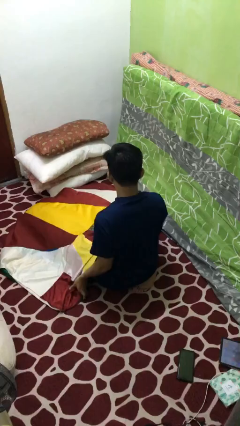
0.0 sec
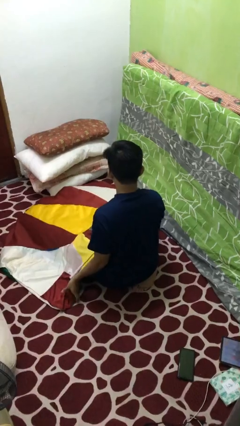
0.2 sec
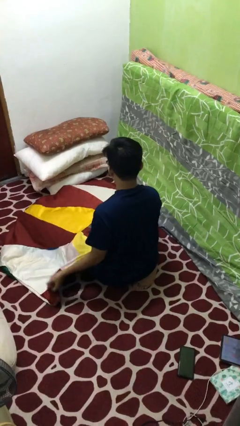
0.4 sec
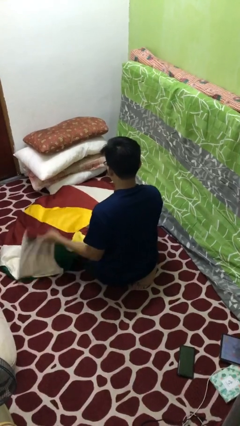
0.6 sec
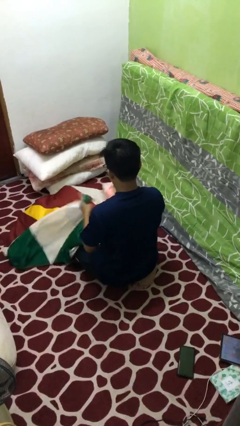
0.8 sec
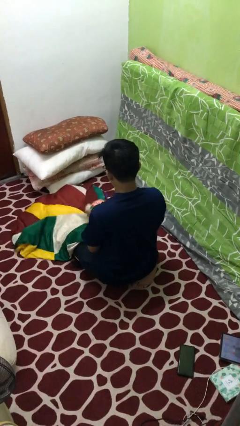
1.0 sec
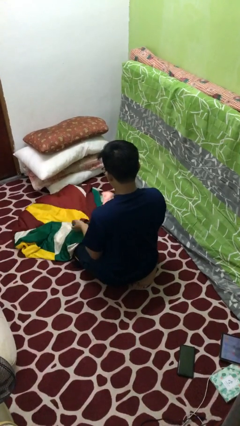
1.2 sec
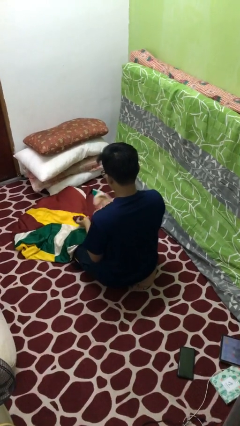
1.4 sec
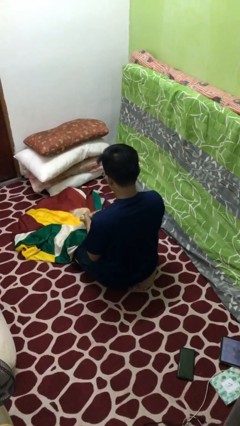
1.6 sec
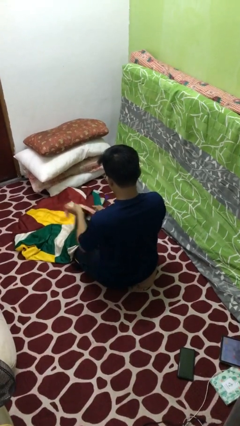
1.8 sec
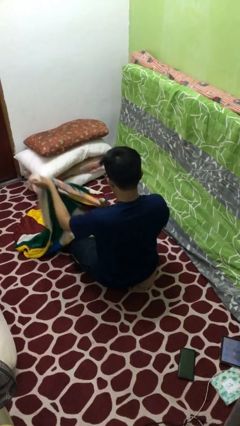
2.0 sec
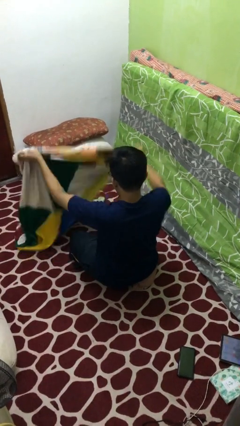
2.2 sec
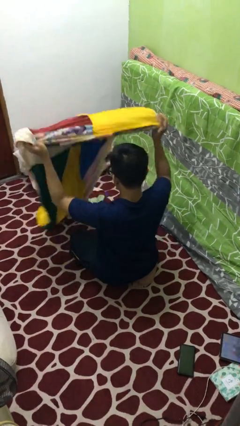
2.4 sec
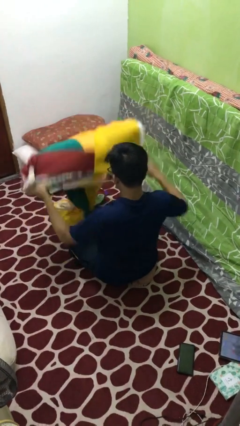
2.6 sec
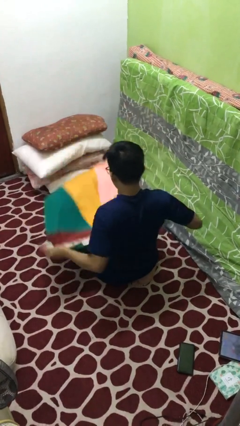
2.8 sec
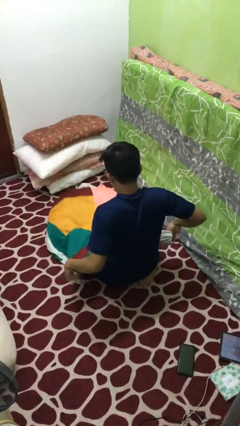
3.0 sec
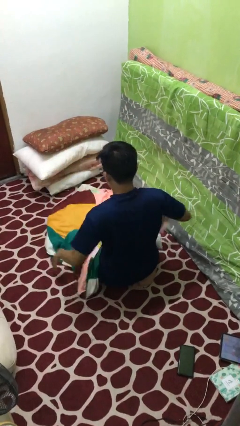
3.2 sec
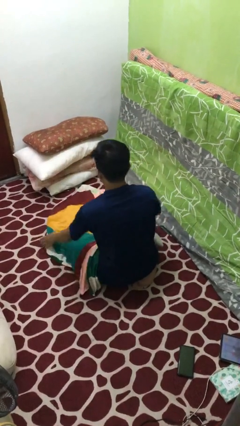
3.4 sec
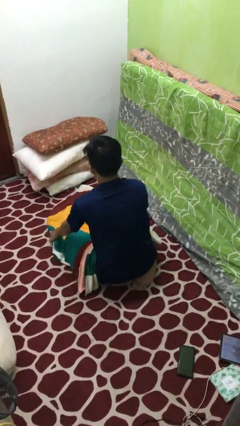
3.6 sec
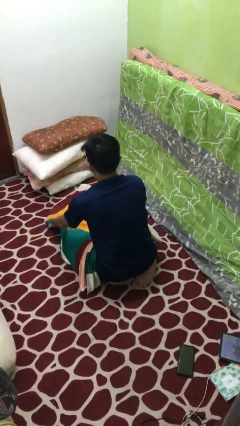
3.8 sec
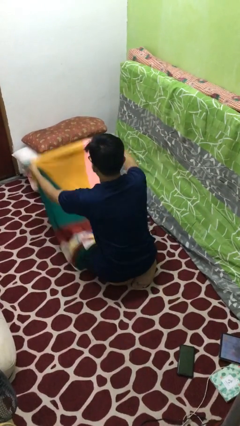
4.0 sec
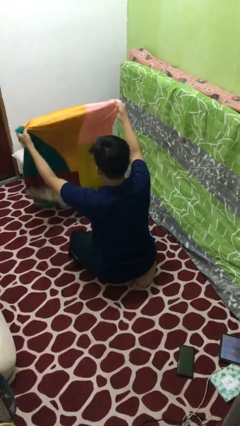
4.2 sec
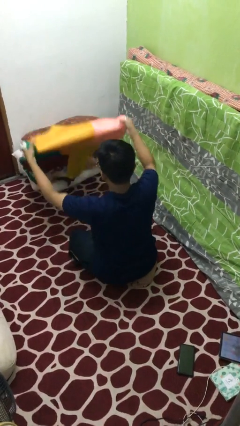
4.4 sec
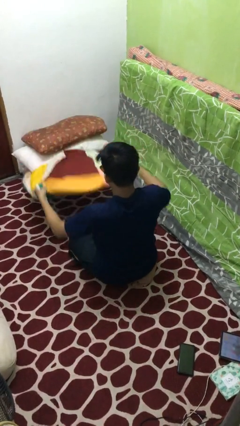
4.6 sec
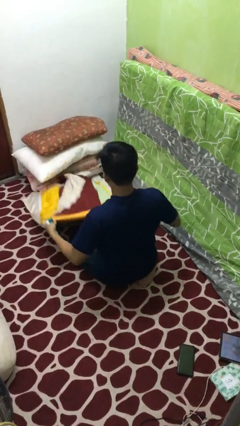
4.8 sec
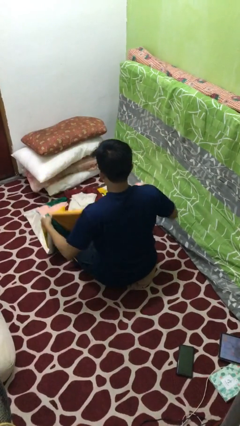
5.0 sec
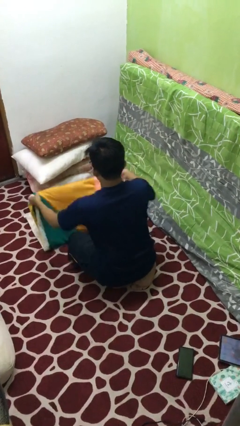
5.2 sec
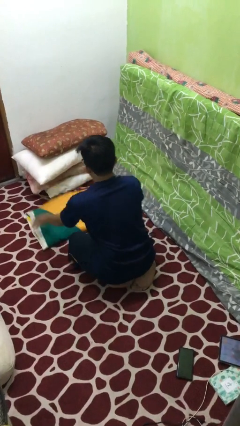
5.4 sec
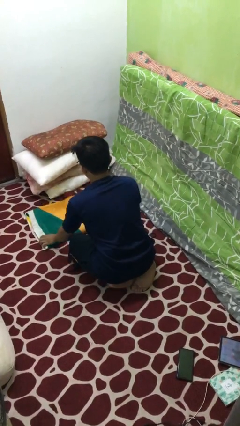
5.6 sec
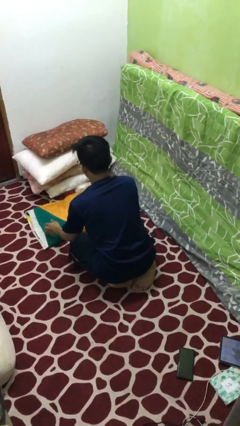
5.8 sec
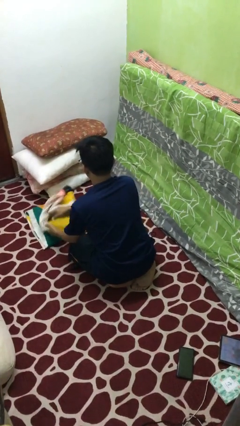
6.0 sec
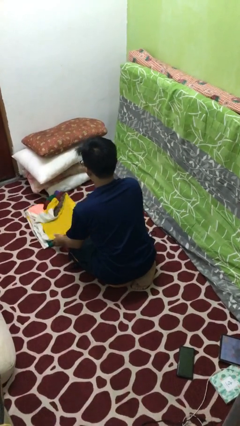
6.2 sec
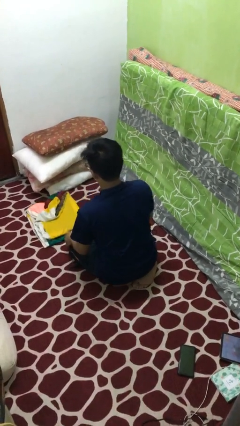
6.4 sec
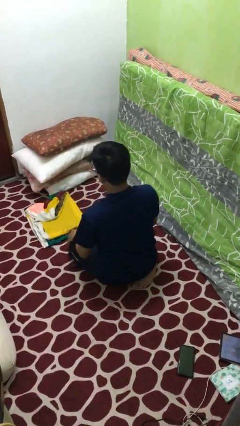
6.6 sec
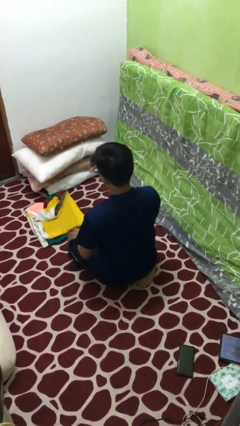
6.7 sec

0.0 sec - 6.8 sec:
person folds blanket

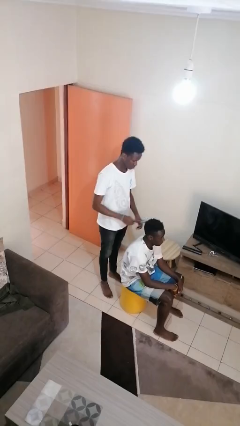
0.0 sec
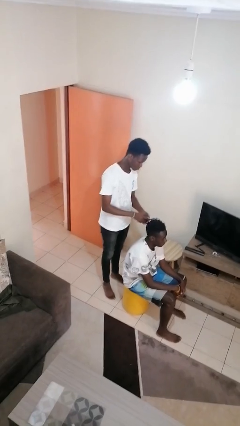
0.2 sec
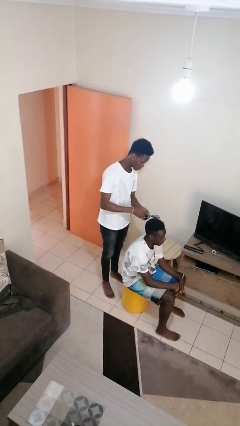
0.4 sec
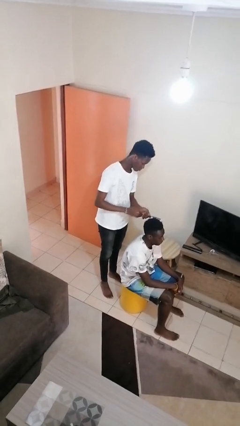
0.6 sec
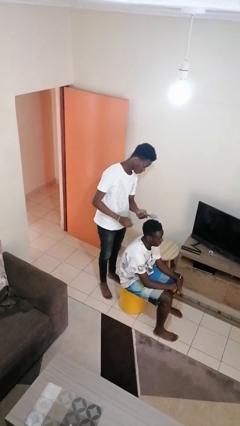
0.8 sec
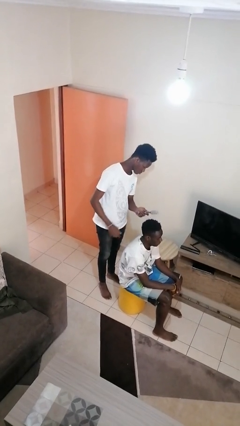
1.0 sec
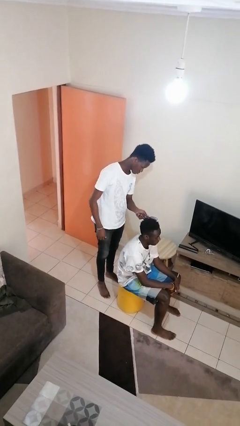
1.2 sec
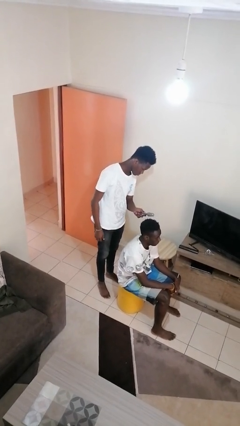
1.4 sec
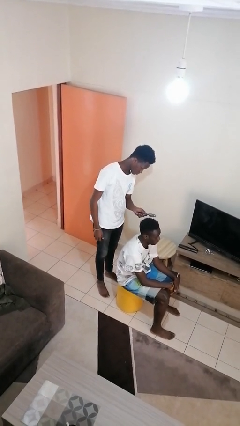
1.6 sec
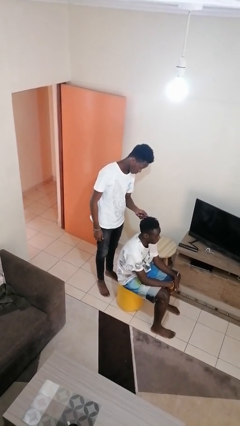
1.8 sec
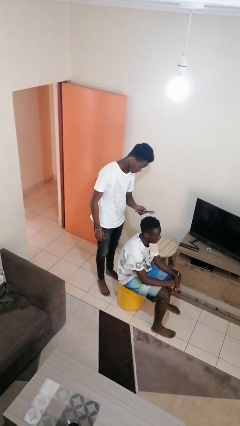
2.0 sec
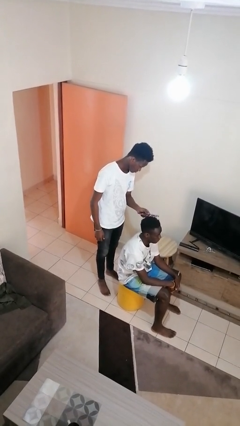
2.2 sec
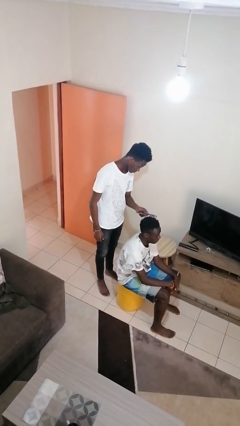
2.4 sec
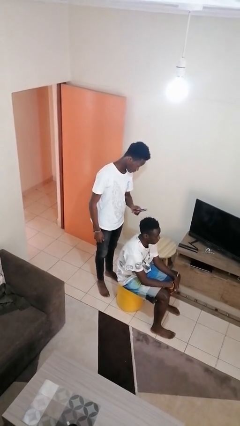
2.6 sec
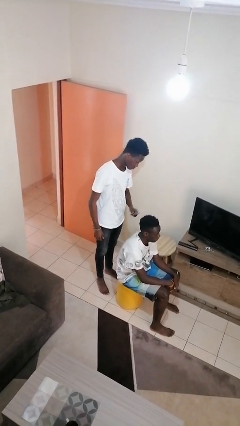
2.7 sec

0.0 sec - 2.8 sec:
person brushes hair of person

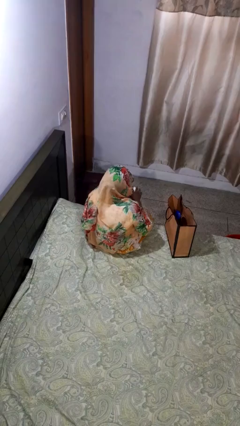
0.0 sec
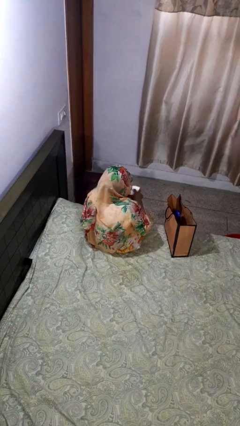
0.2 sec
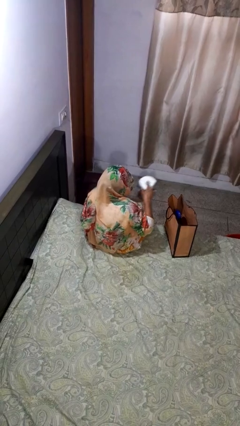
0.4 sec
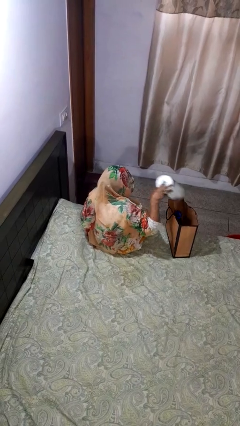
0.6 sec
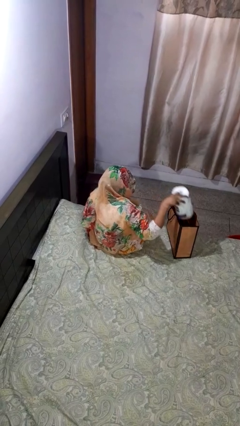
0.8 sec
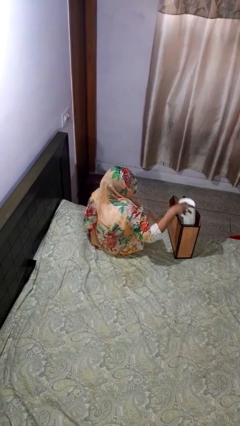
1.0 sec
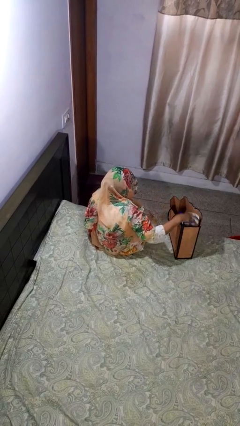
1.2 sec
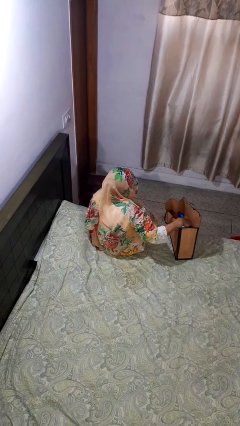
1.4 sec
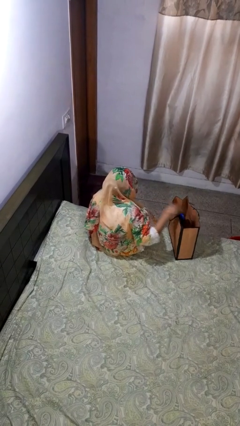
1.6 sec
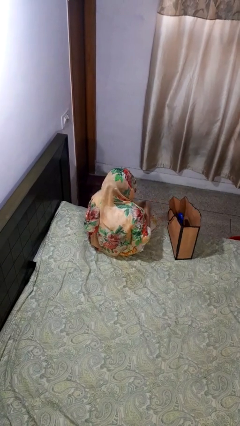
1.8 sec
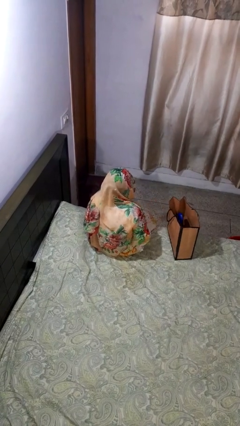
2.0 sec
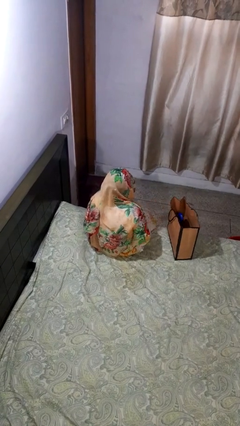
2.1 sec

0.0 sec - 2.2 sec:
person puts object into bag

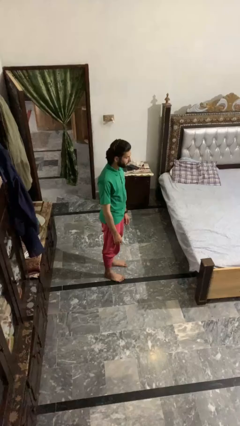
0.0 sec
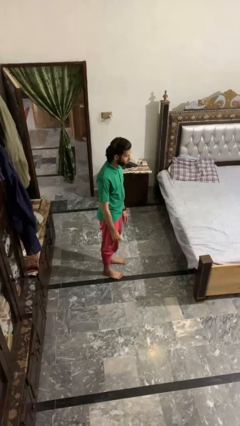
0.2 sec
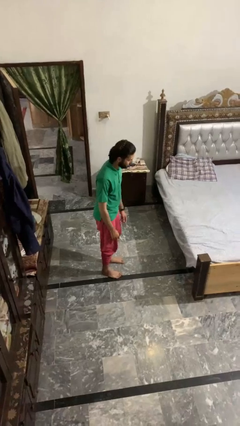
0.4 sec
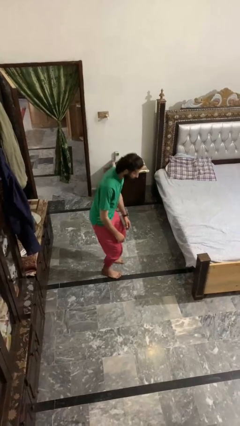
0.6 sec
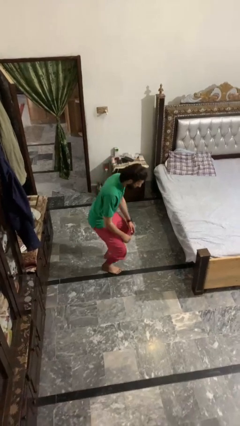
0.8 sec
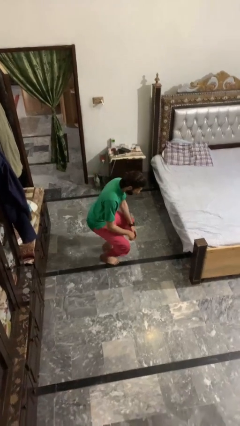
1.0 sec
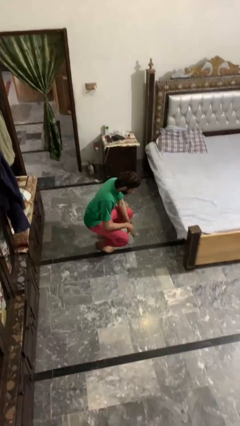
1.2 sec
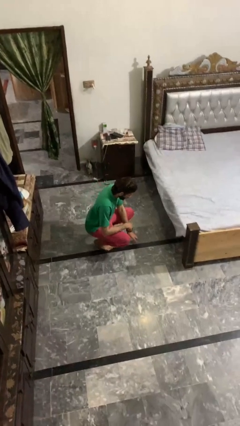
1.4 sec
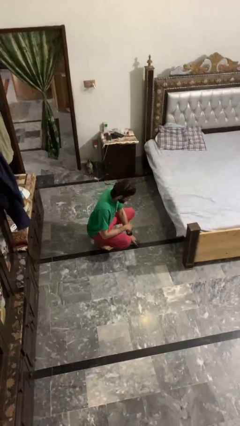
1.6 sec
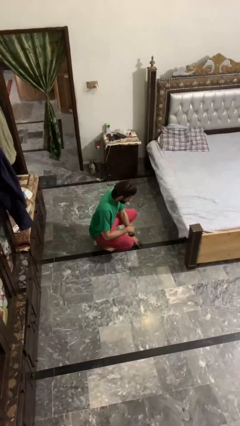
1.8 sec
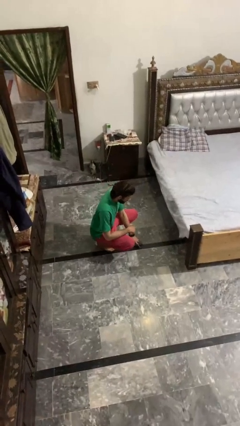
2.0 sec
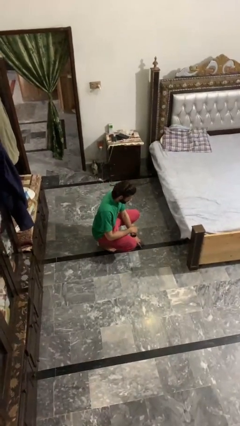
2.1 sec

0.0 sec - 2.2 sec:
person squats

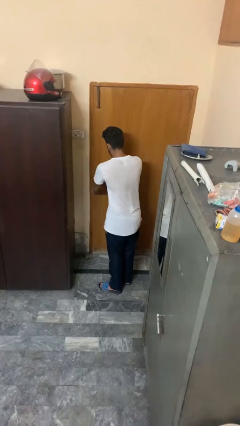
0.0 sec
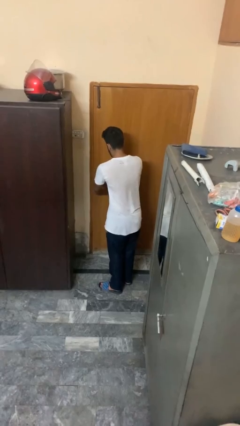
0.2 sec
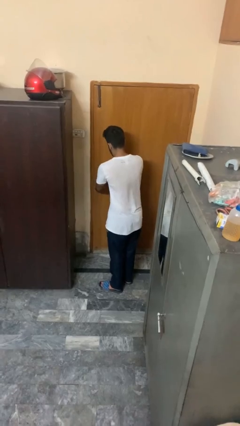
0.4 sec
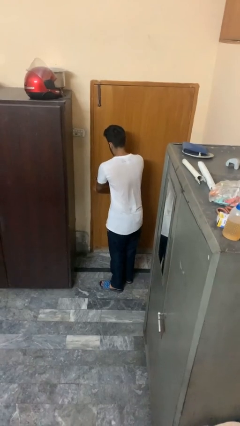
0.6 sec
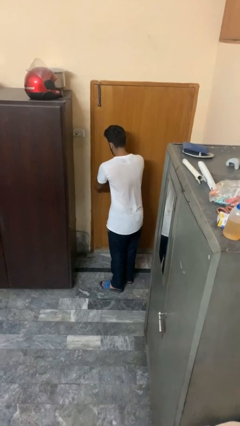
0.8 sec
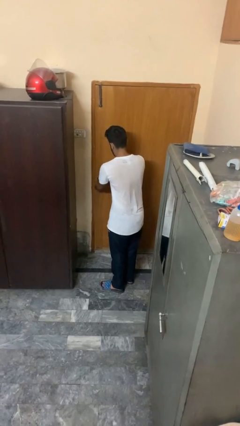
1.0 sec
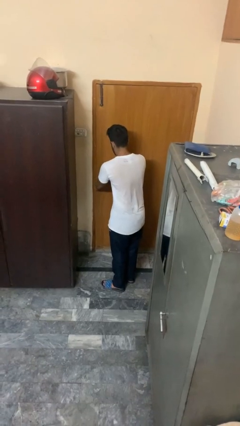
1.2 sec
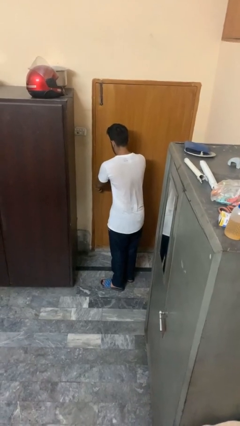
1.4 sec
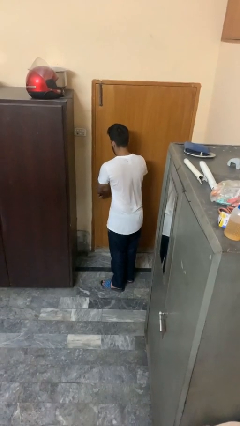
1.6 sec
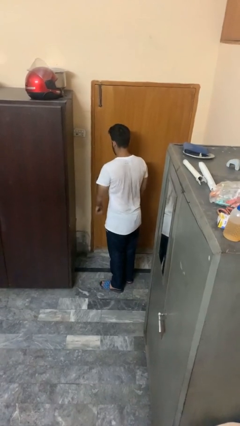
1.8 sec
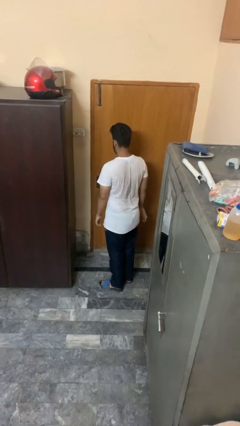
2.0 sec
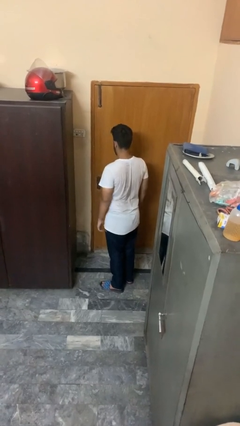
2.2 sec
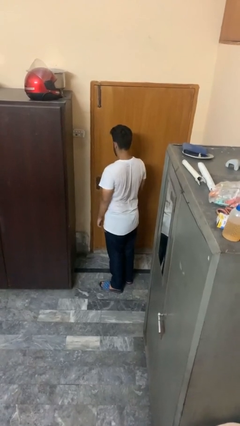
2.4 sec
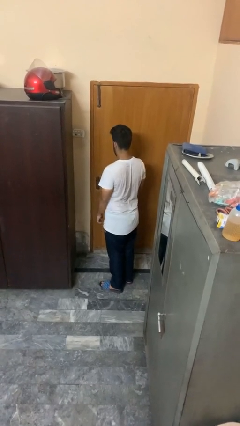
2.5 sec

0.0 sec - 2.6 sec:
person locks door with keys

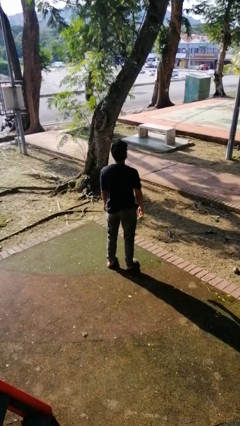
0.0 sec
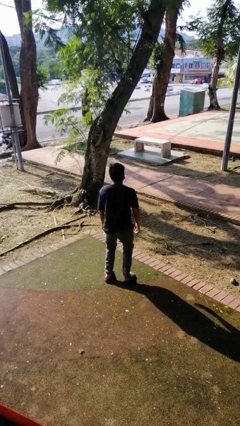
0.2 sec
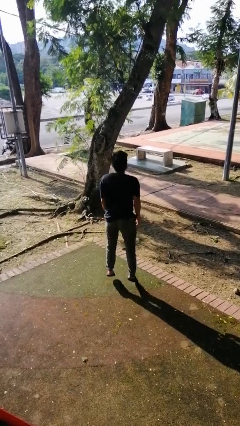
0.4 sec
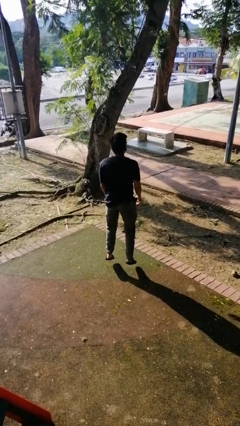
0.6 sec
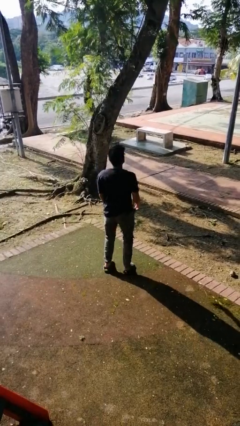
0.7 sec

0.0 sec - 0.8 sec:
person jumps

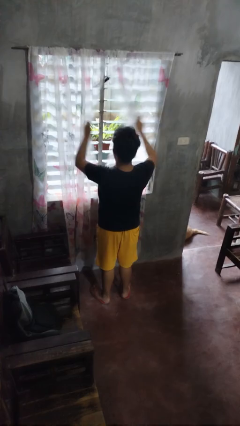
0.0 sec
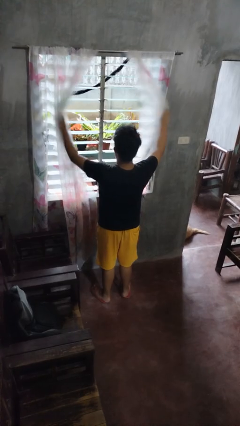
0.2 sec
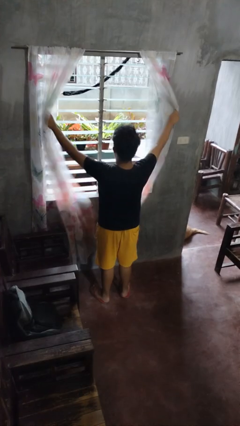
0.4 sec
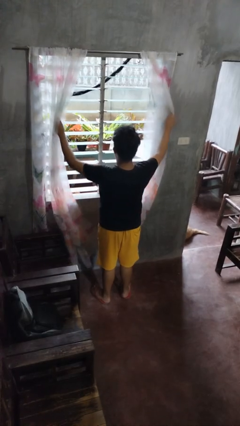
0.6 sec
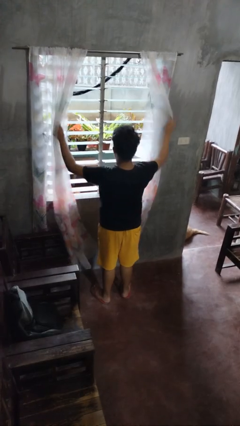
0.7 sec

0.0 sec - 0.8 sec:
person opens curtains
